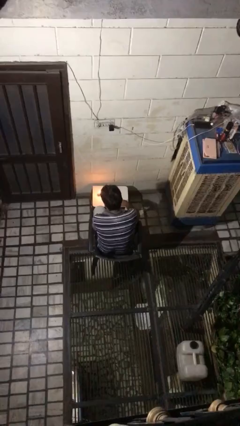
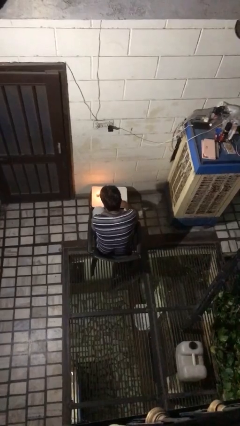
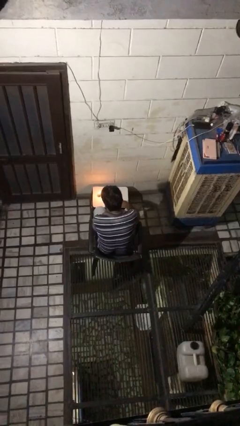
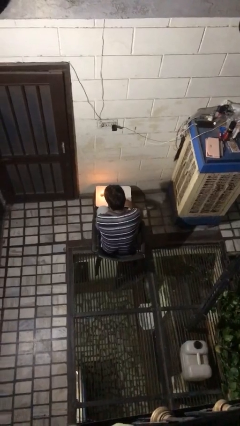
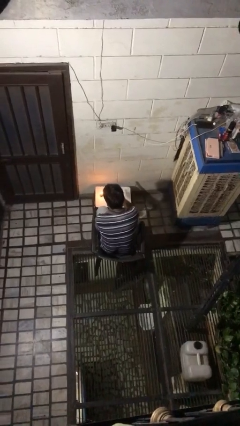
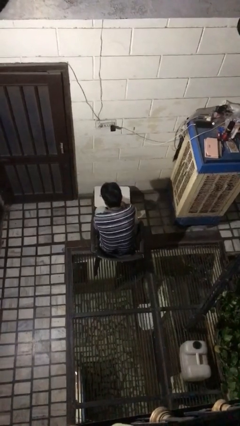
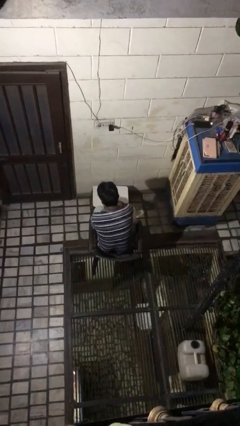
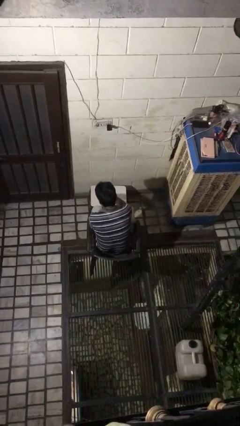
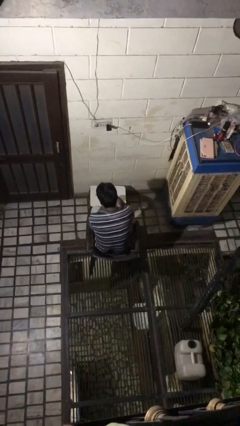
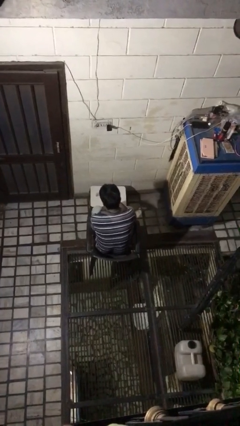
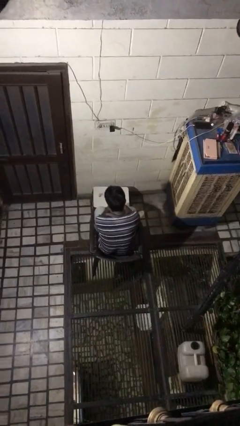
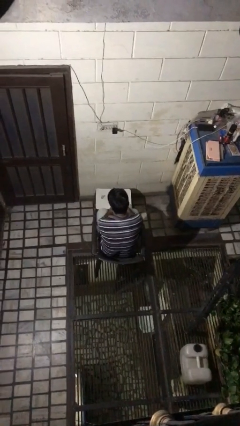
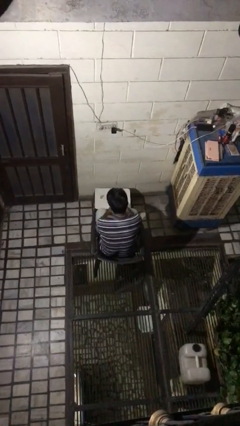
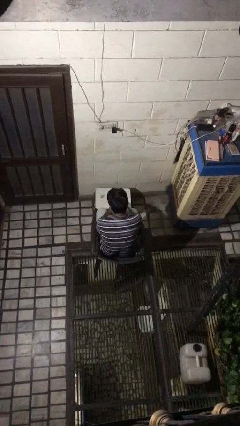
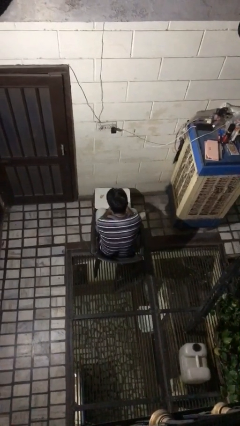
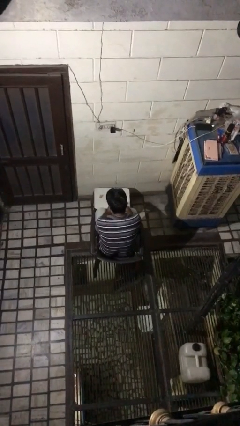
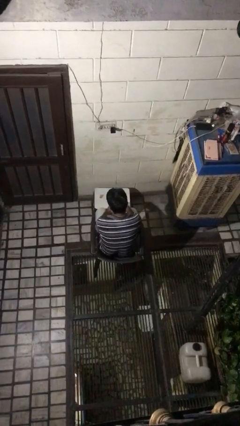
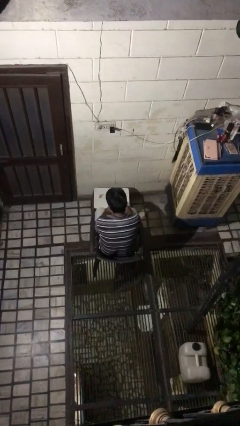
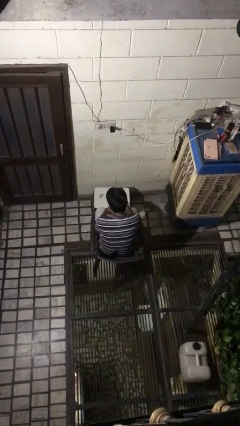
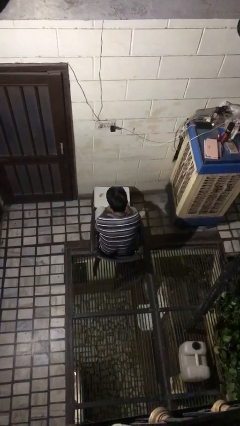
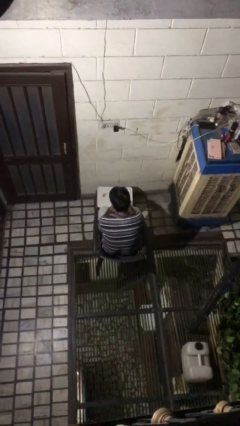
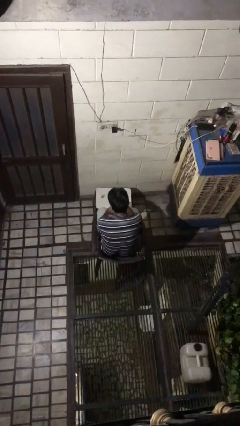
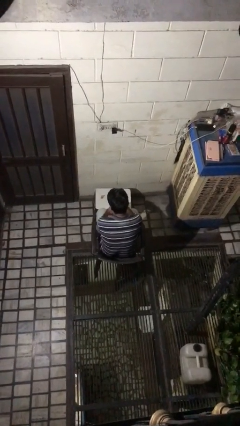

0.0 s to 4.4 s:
person extinguishes candle

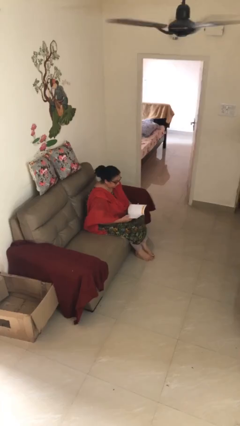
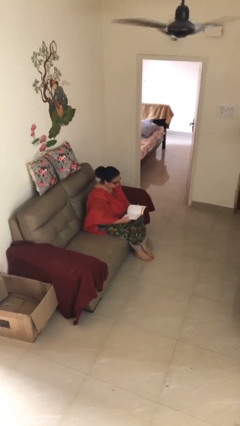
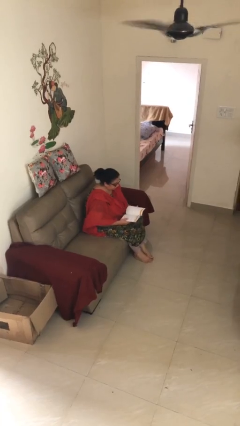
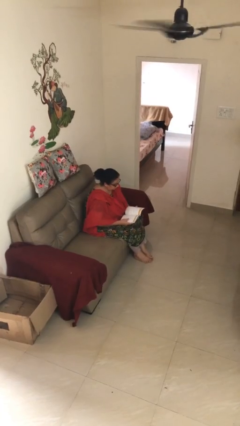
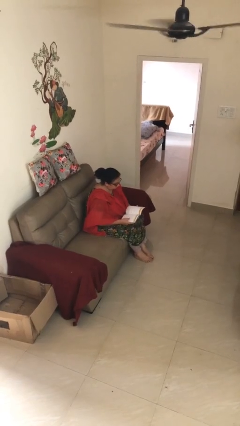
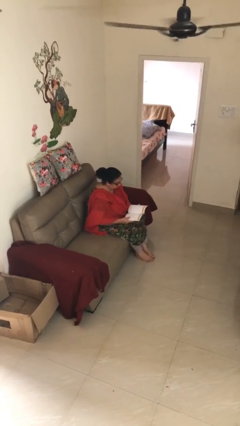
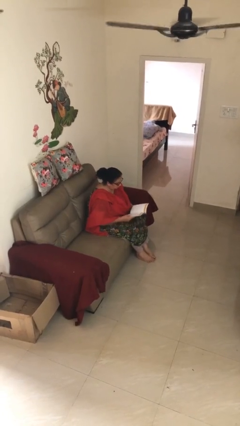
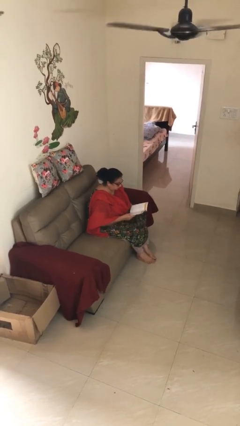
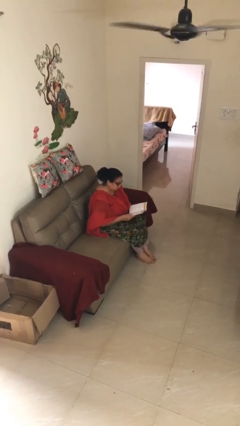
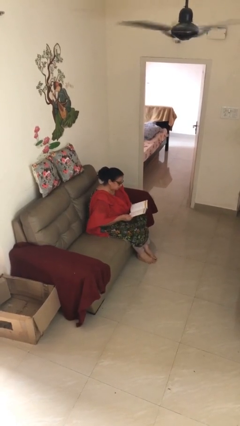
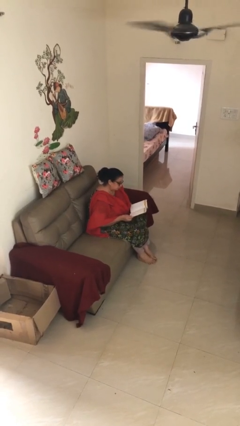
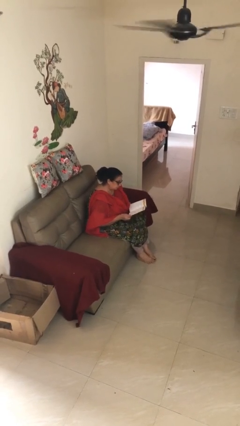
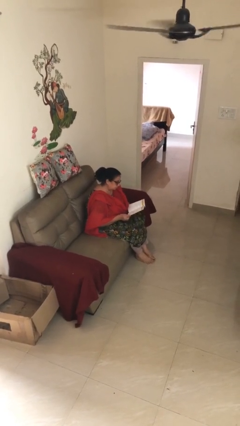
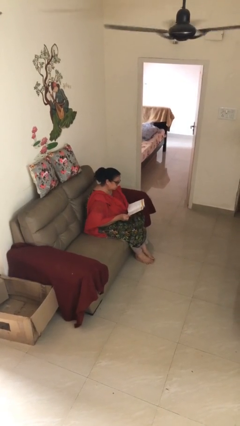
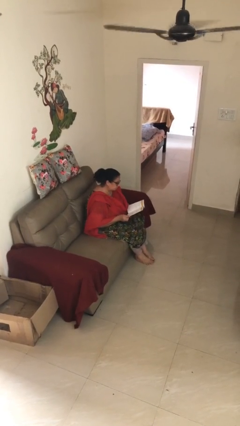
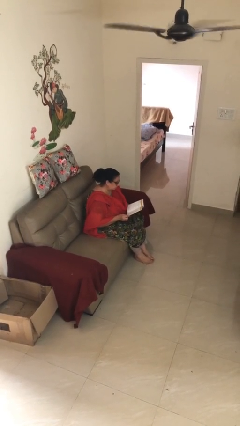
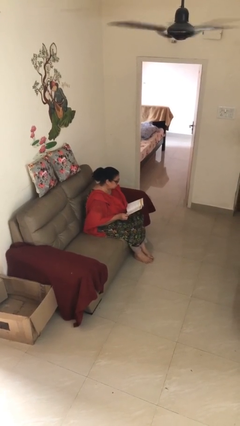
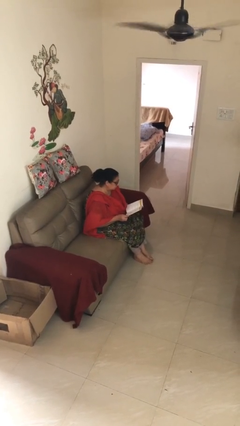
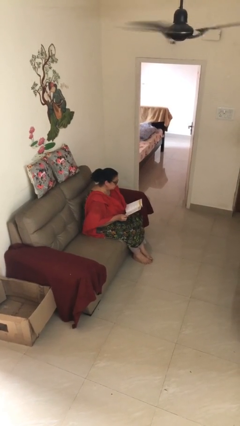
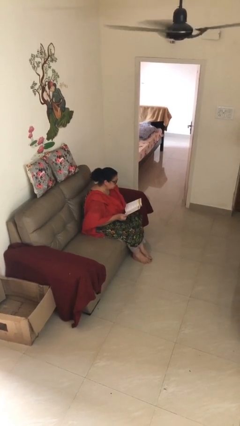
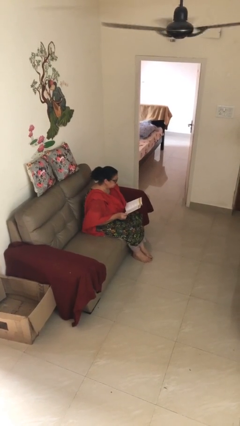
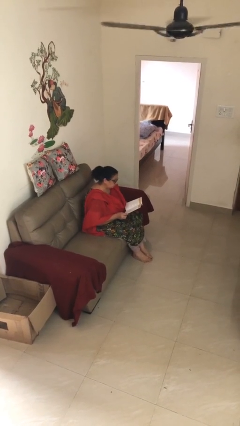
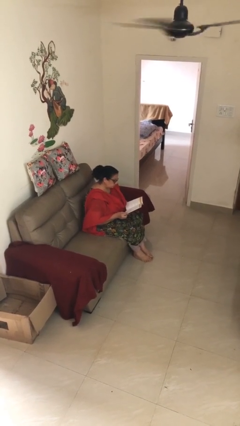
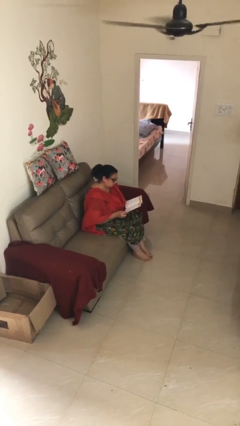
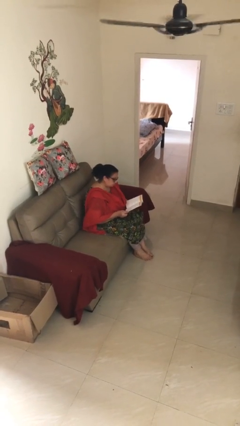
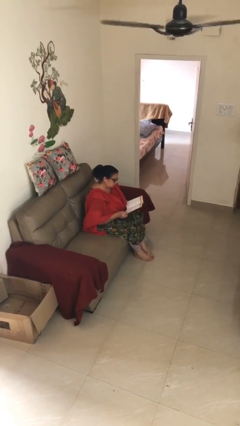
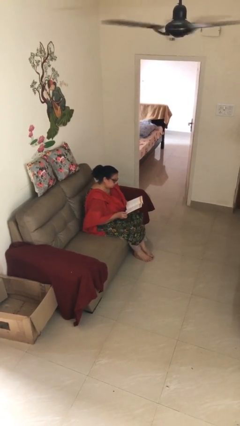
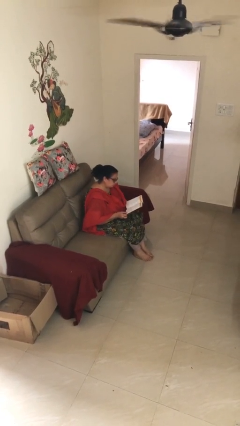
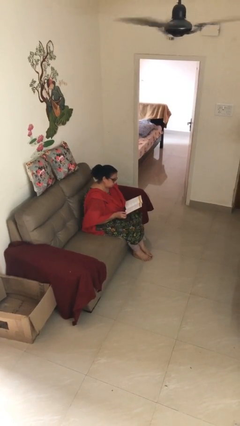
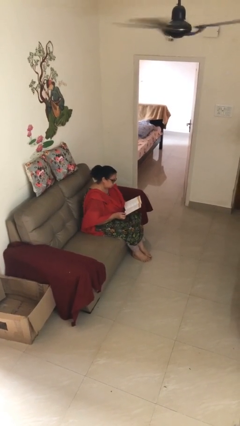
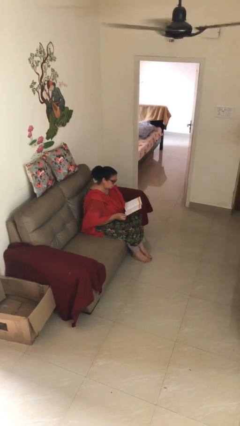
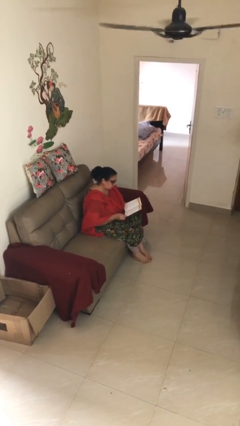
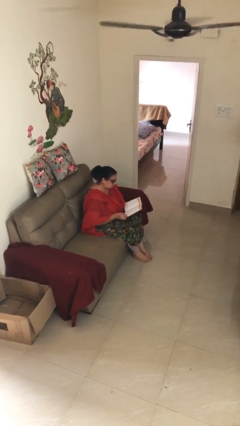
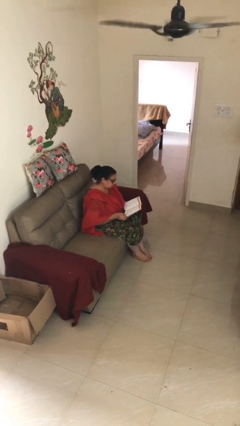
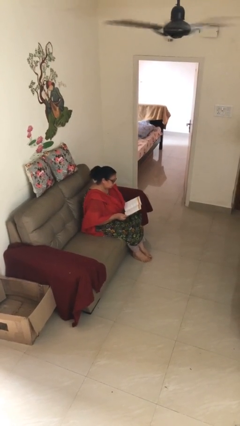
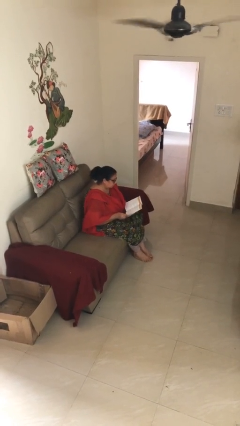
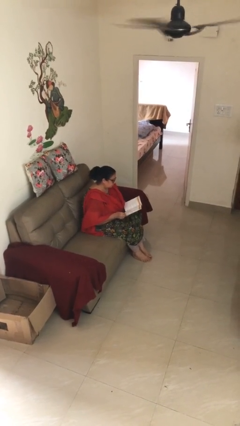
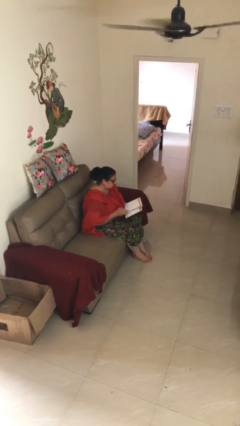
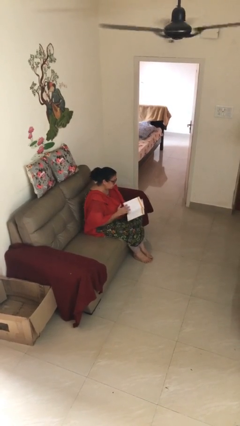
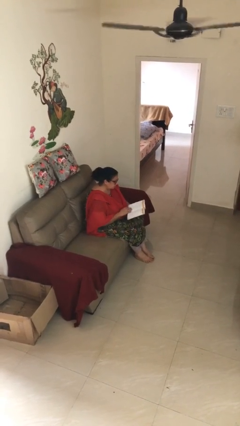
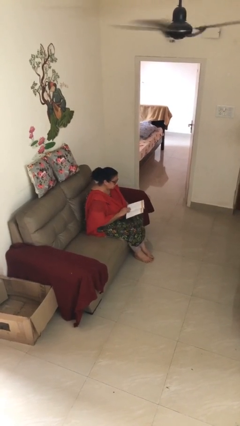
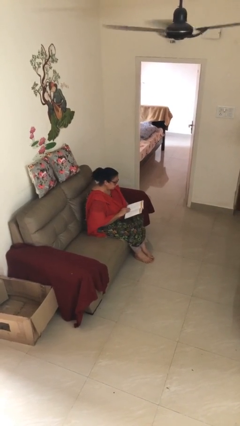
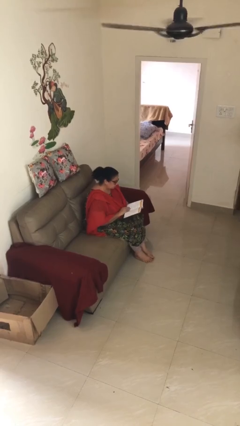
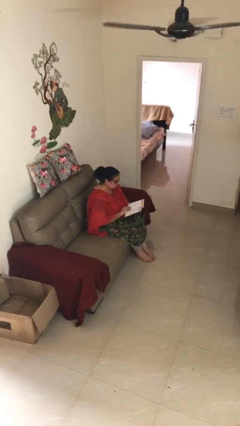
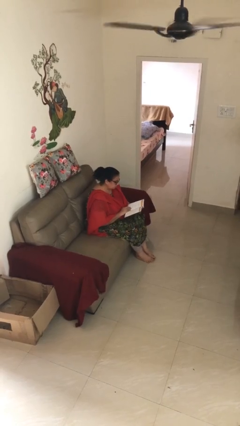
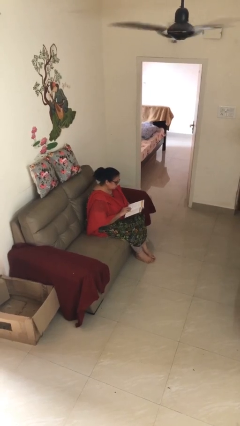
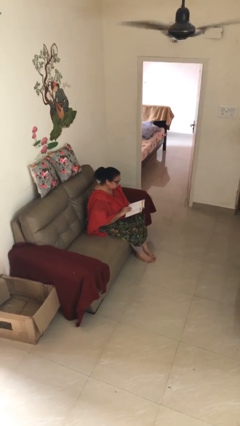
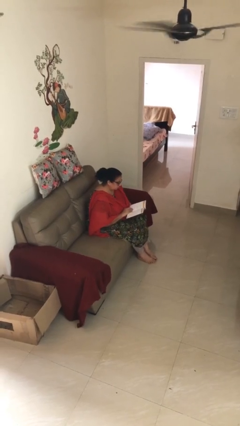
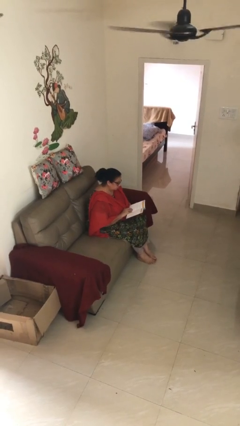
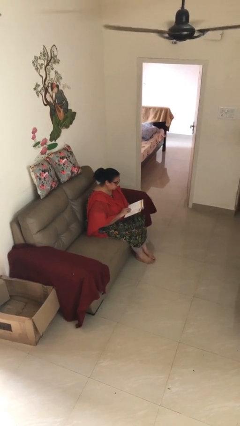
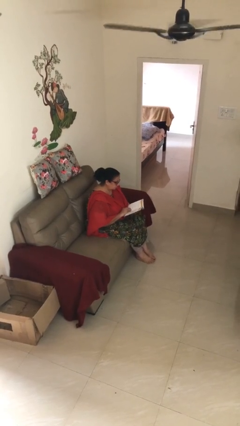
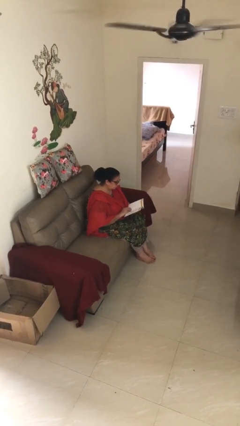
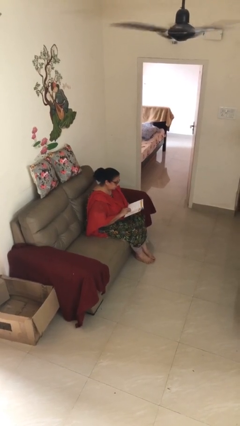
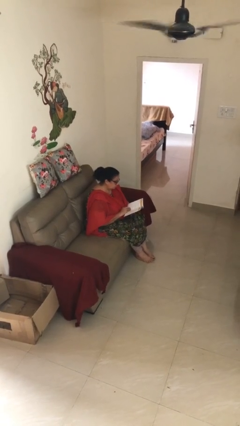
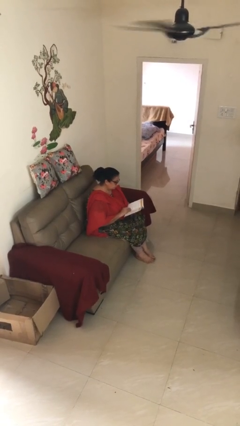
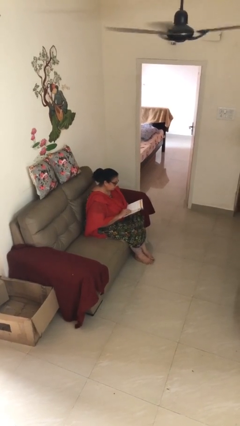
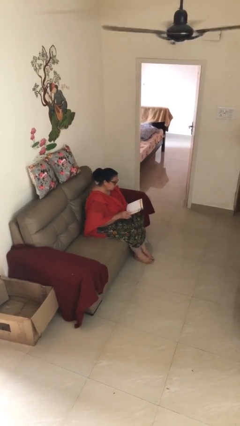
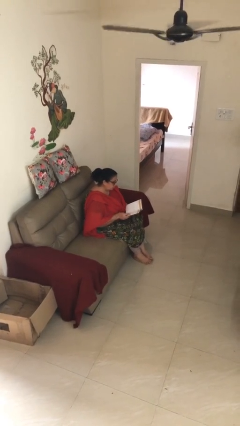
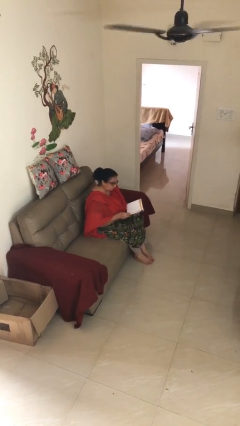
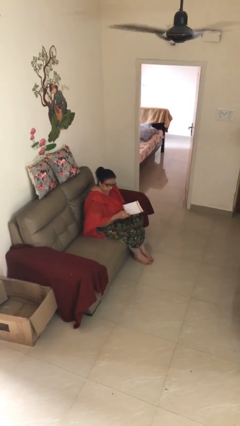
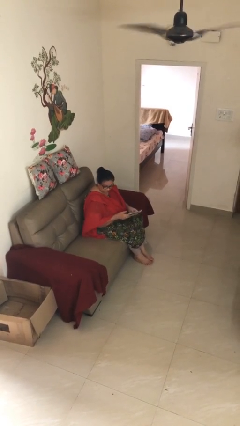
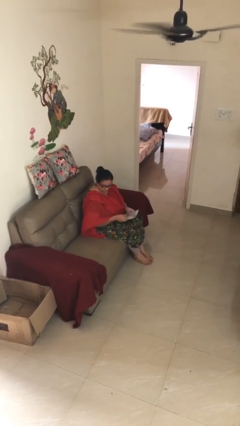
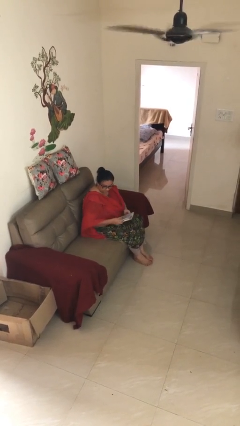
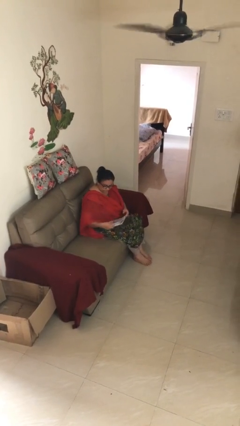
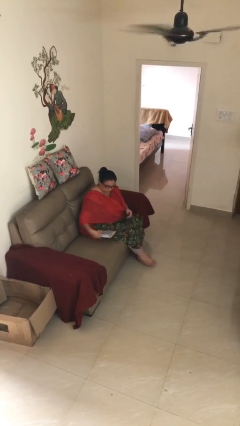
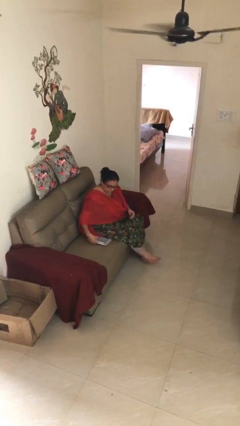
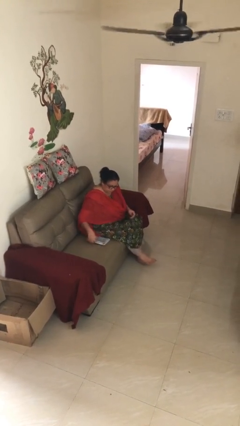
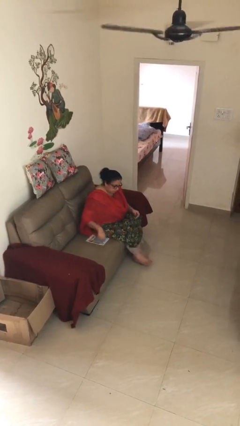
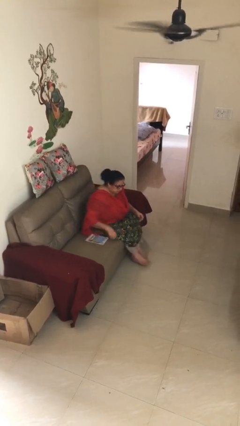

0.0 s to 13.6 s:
person reads document
